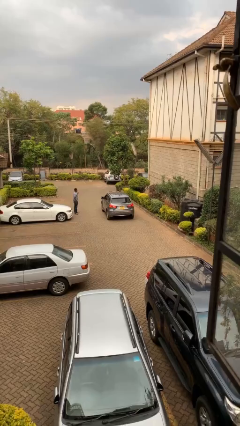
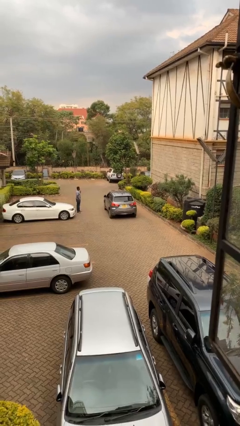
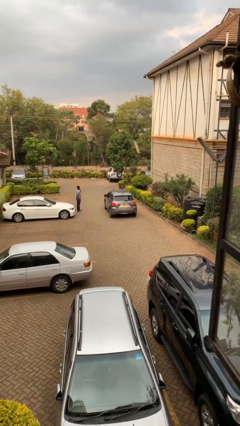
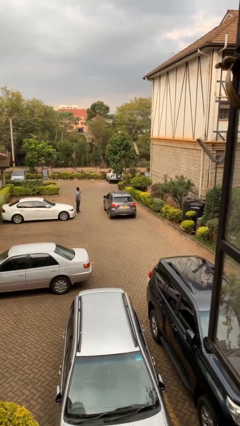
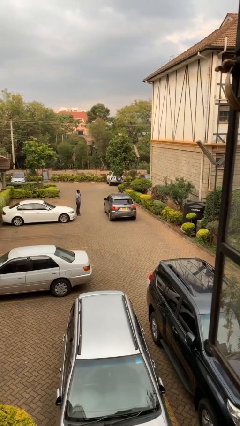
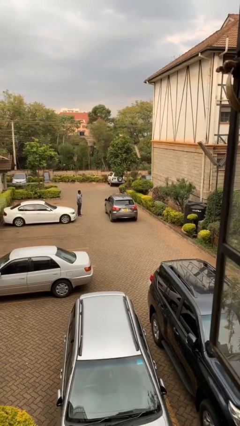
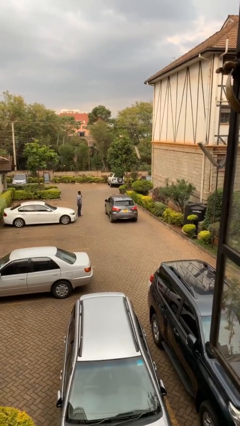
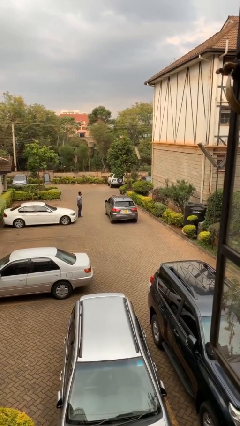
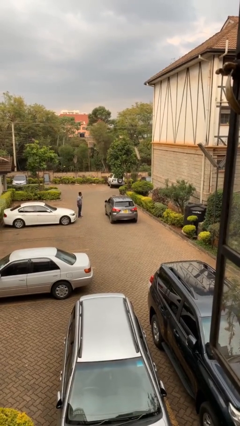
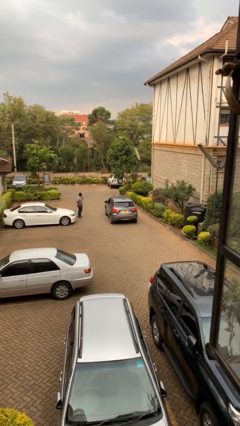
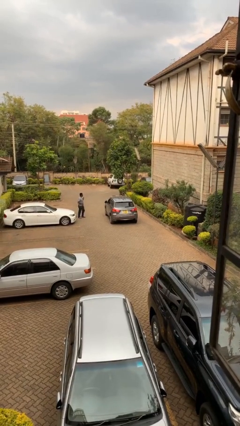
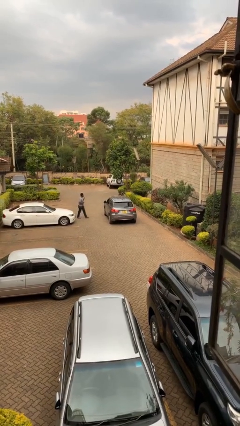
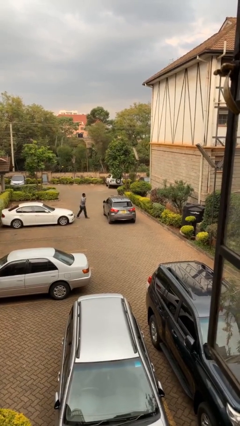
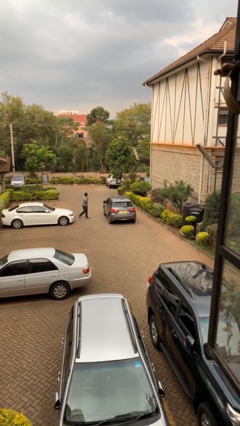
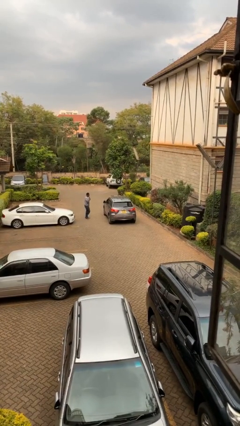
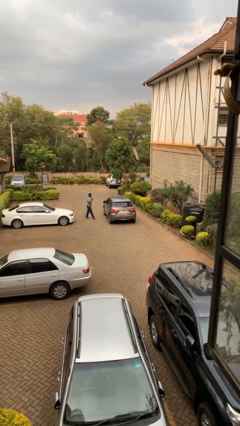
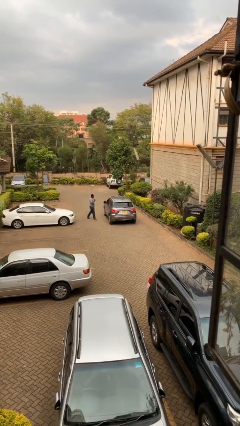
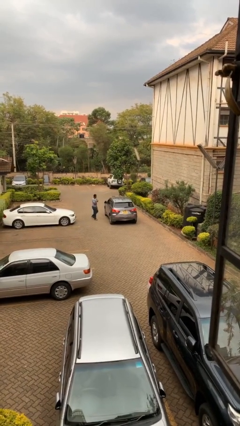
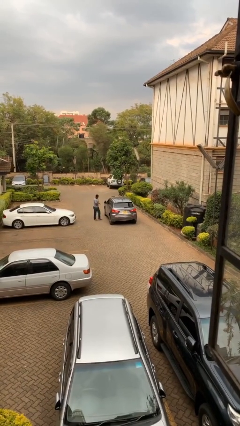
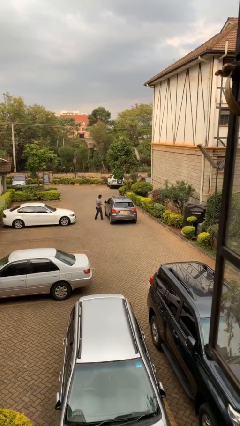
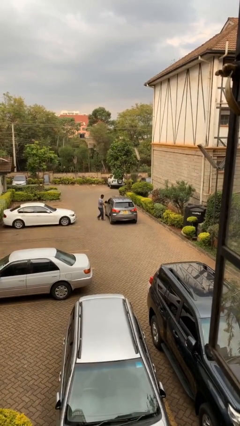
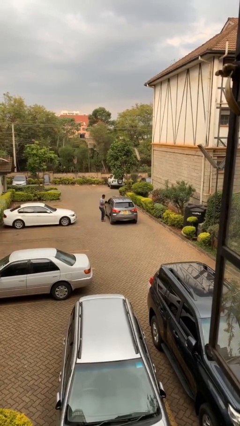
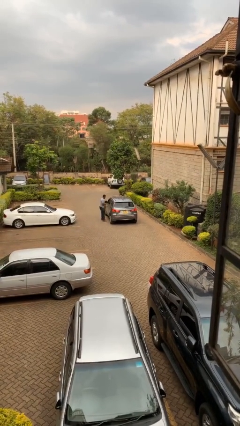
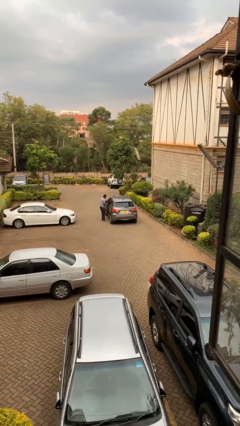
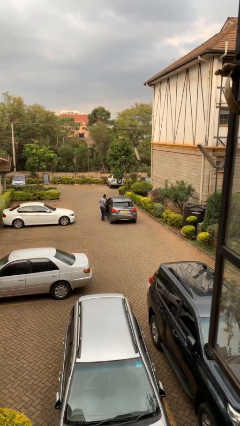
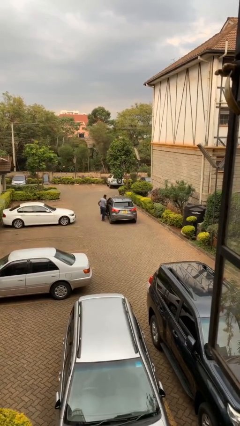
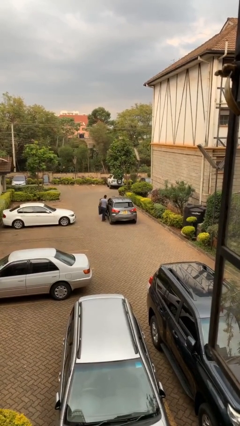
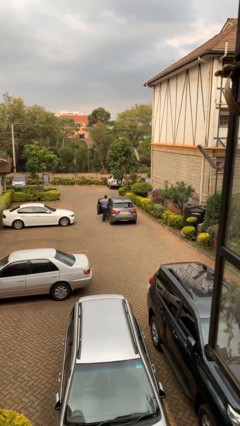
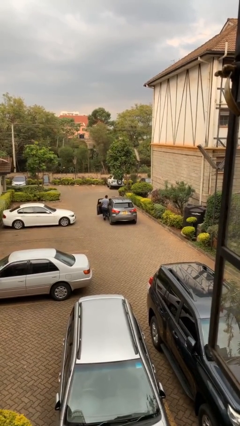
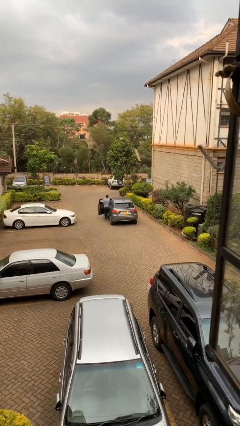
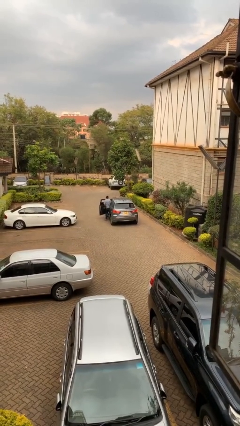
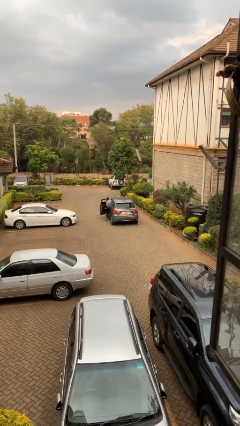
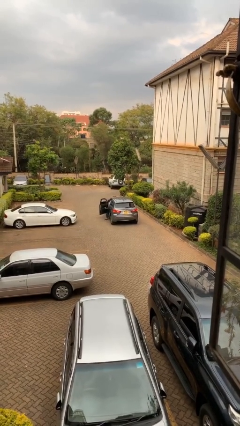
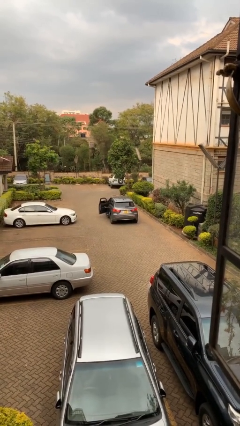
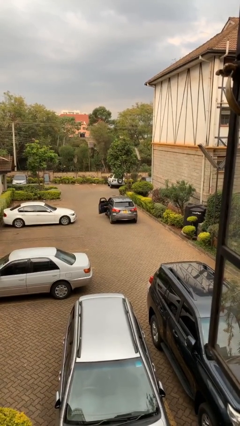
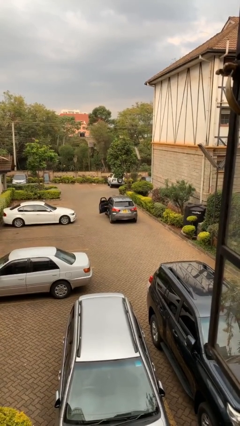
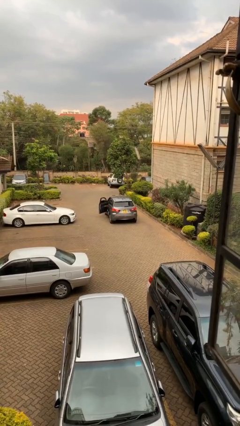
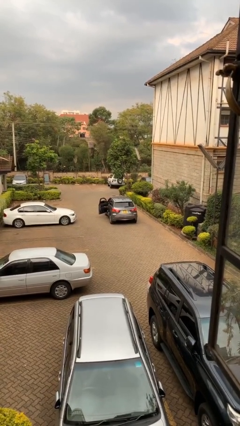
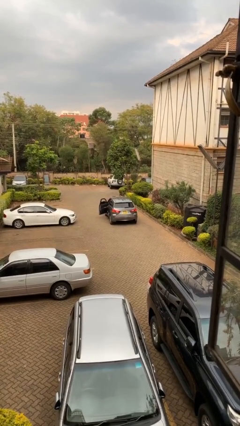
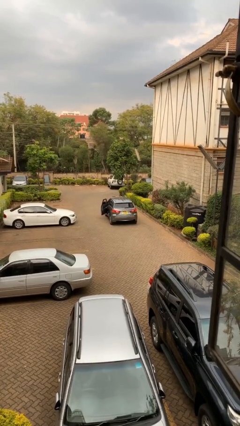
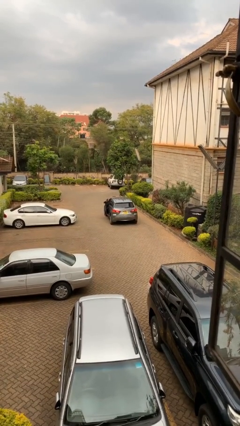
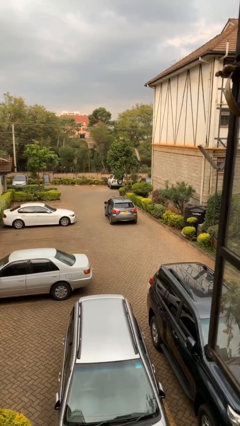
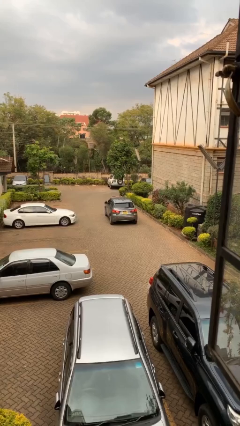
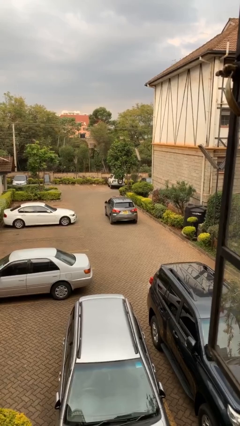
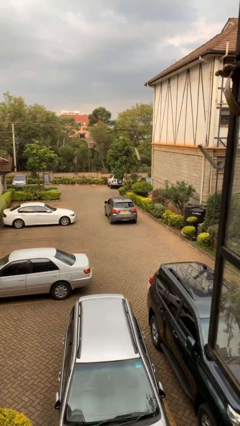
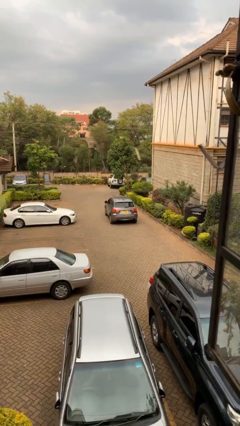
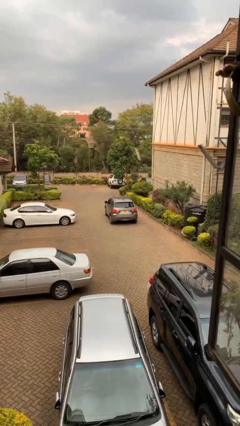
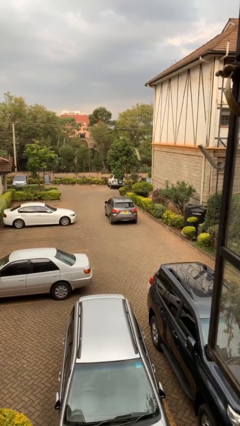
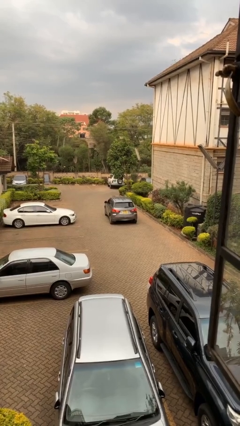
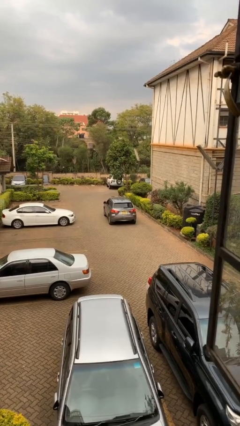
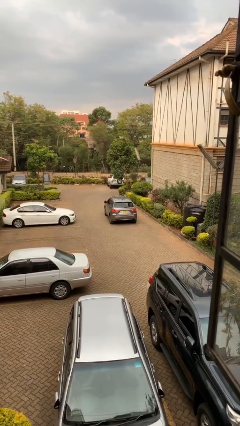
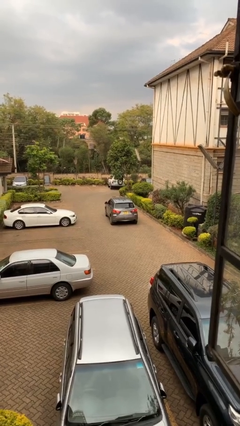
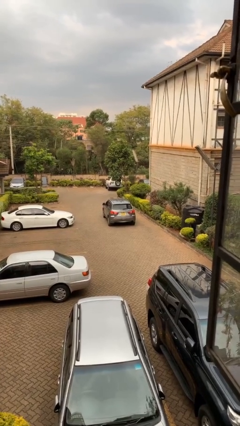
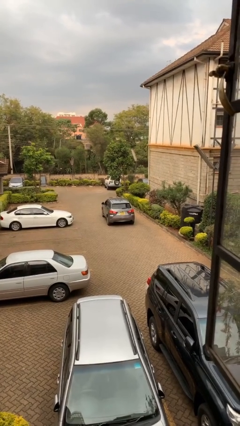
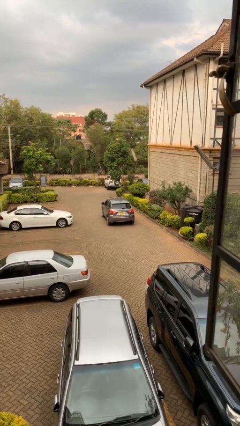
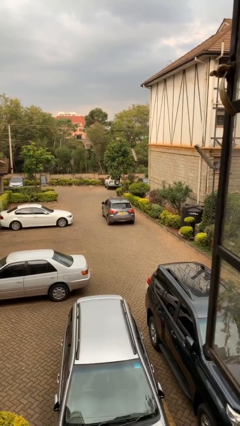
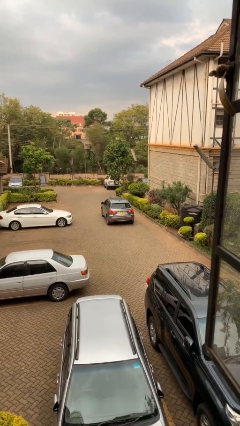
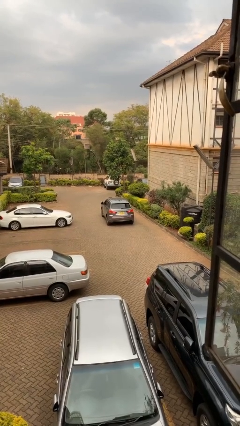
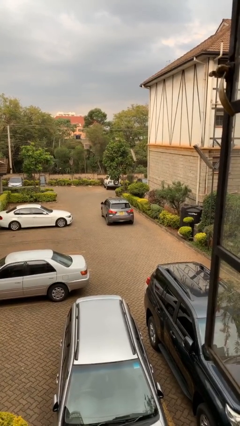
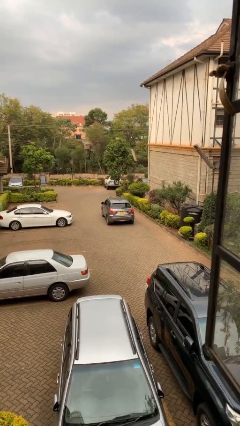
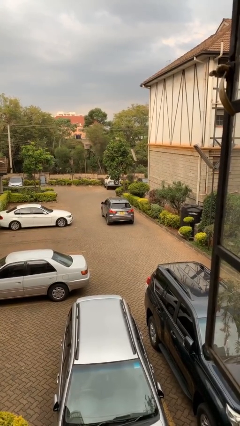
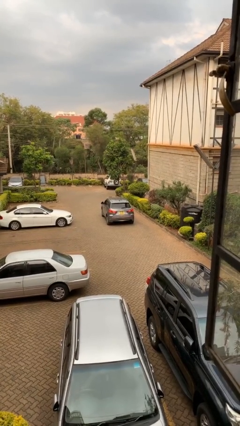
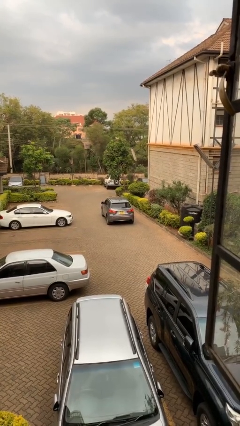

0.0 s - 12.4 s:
car picks up person

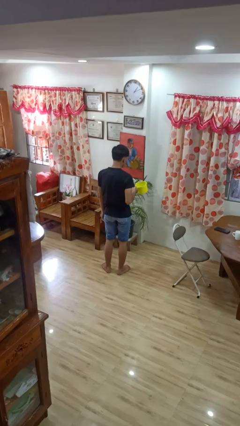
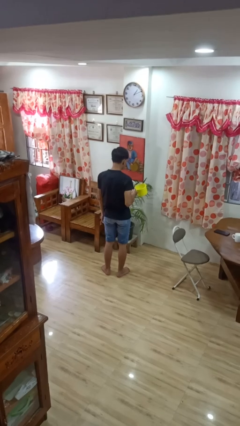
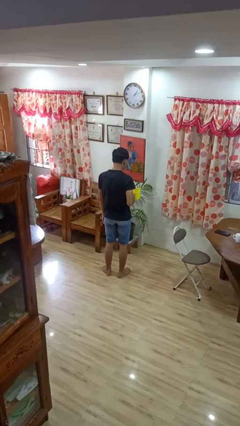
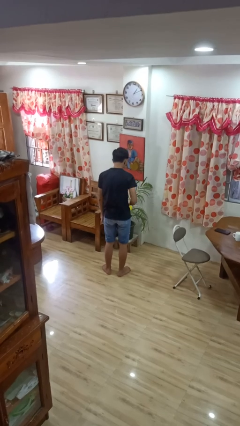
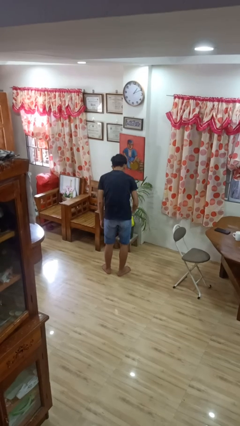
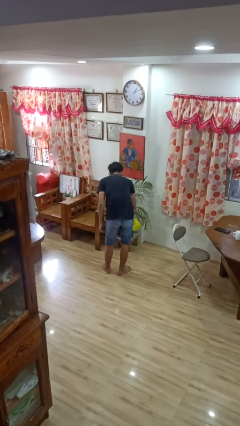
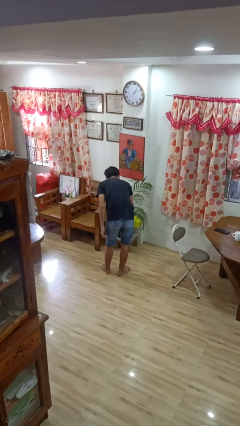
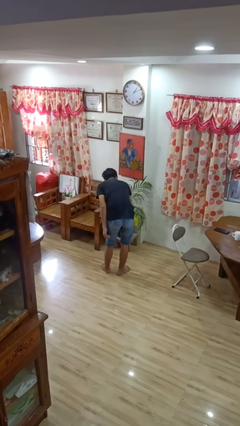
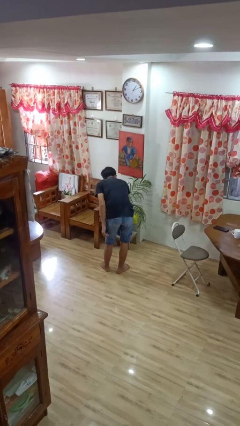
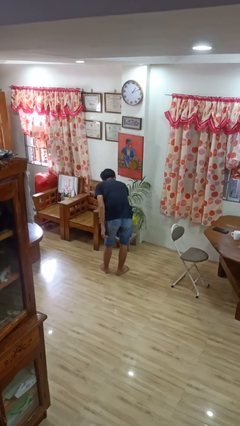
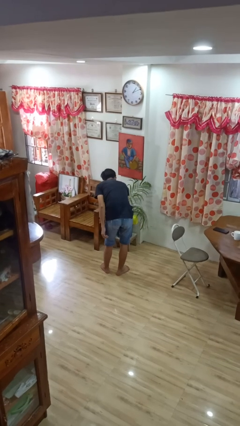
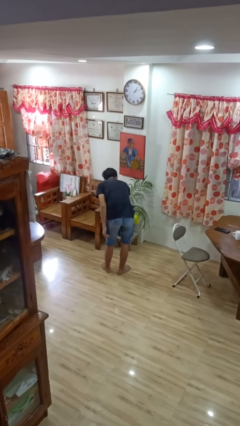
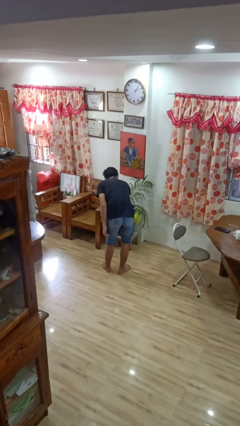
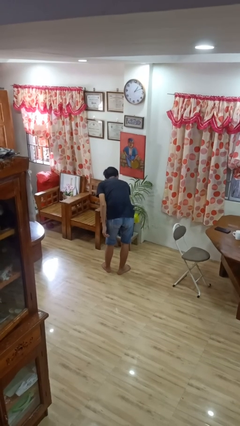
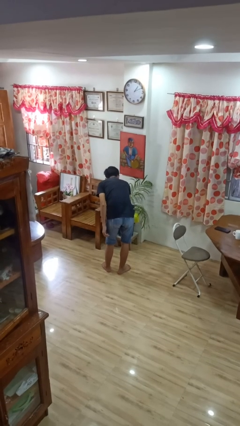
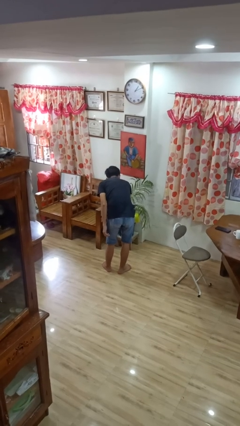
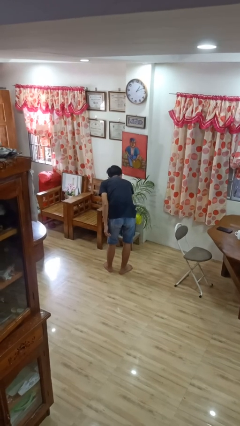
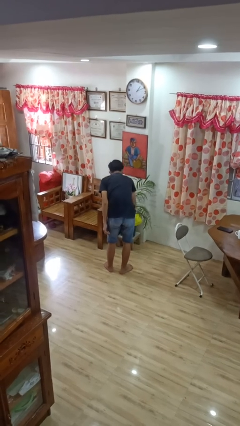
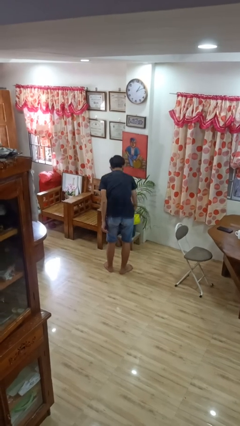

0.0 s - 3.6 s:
person waters houseplant

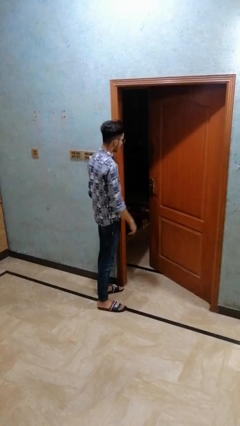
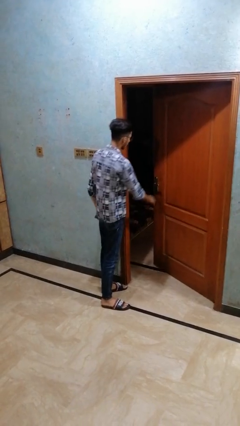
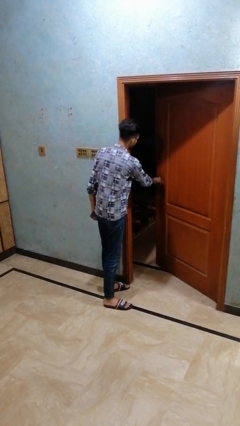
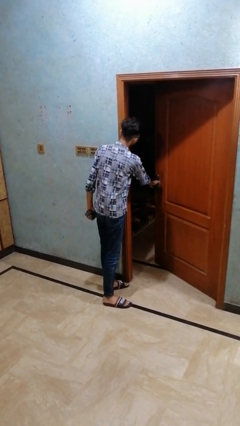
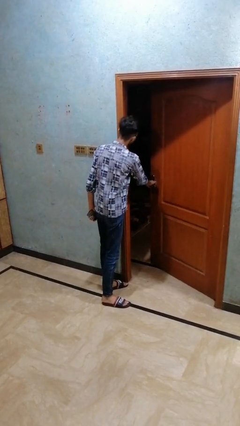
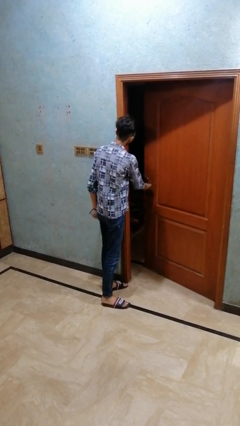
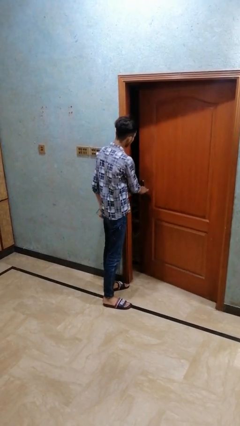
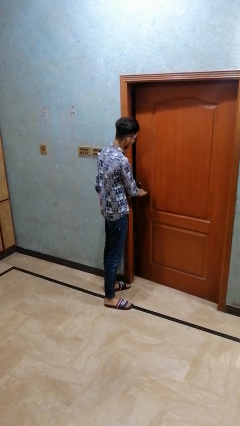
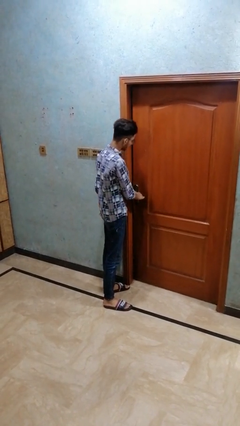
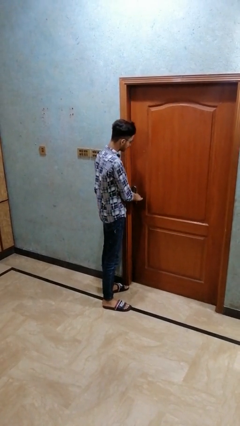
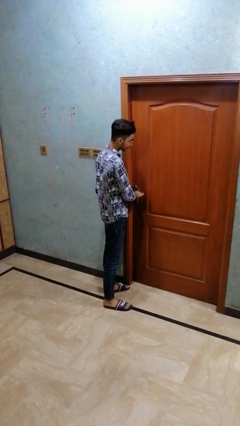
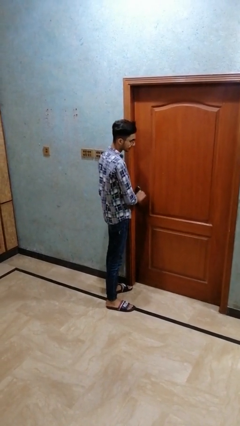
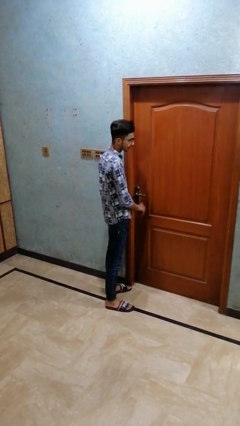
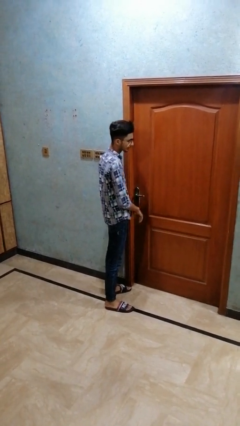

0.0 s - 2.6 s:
person closes closet door
